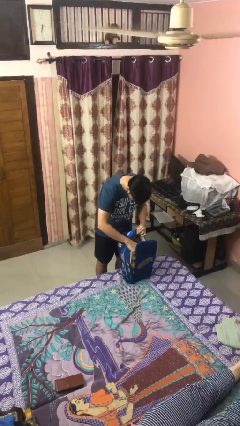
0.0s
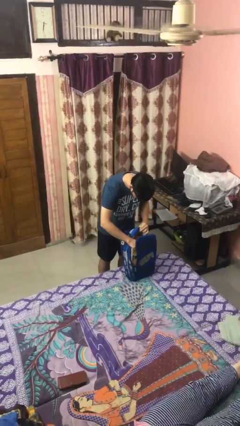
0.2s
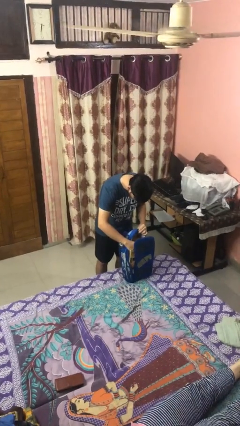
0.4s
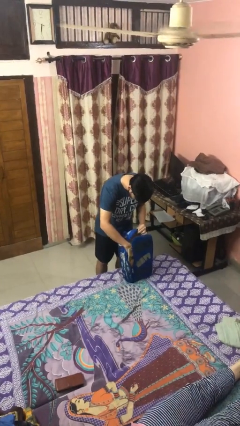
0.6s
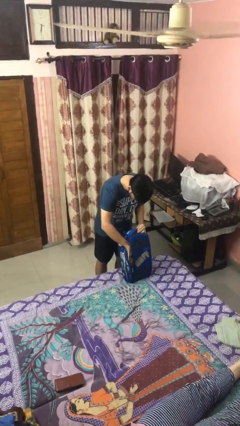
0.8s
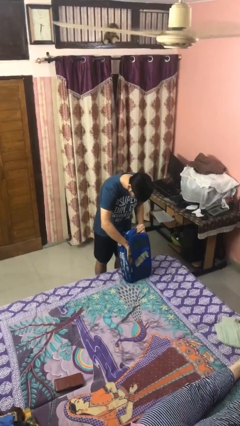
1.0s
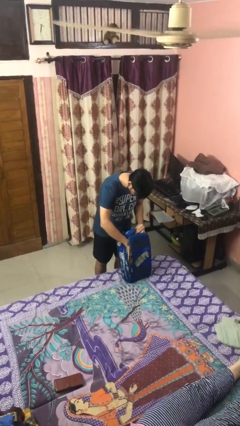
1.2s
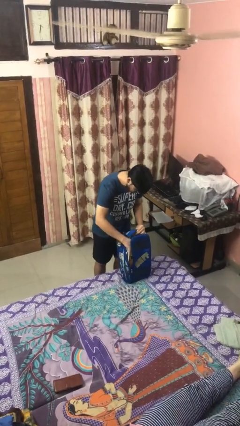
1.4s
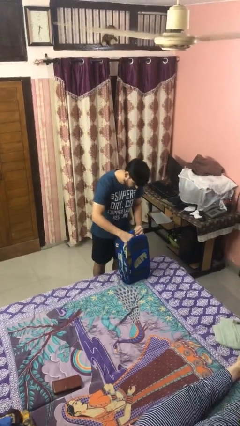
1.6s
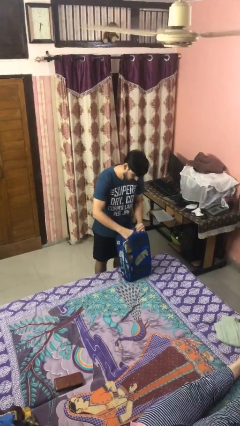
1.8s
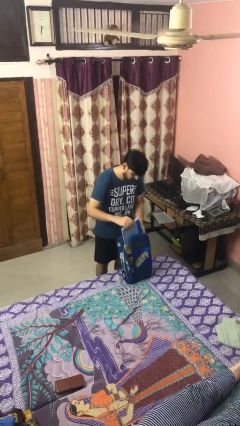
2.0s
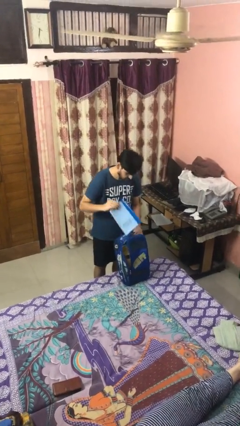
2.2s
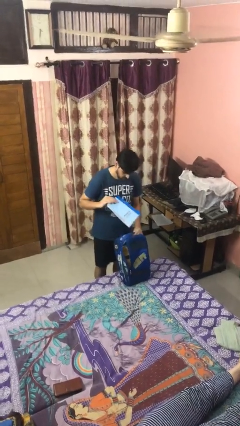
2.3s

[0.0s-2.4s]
person takes object from purse

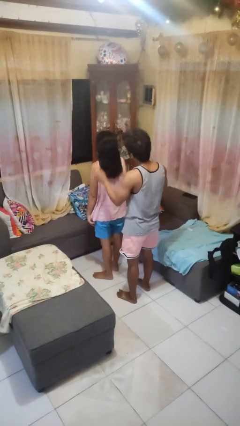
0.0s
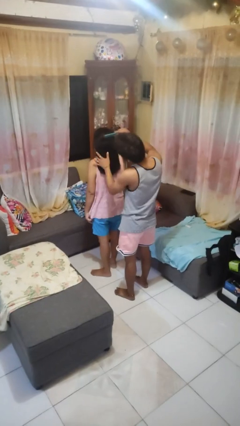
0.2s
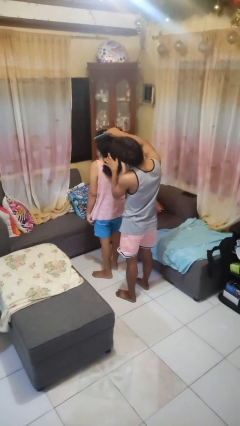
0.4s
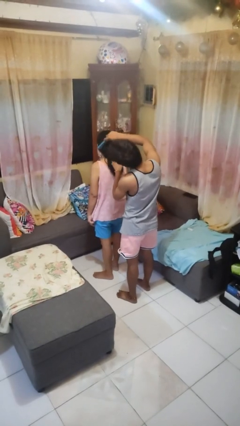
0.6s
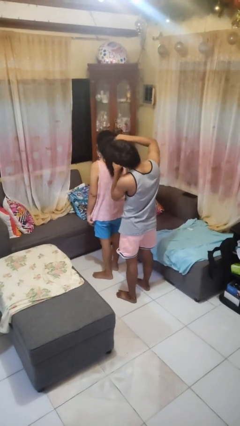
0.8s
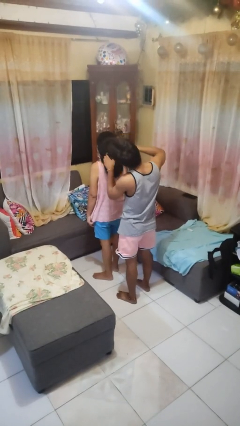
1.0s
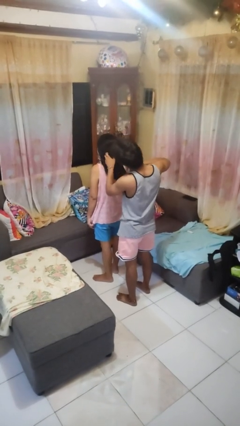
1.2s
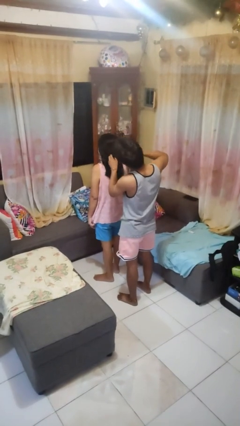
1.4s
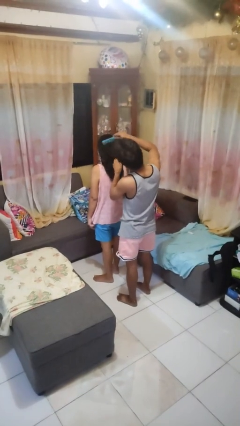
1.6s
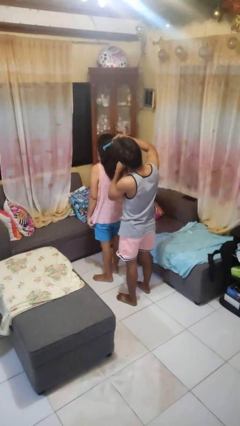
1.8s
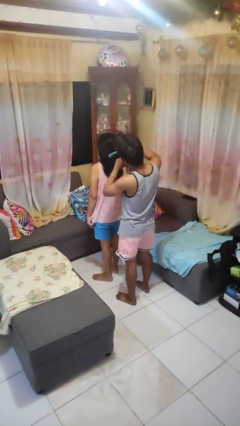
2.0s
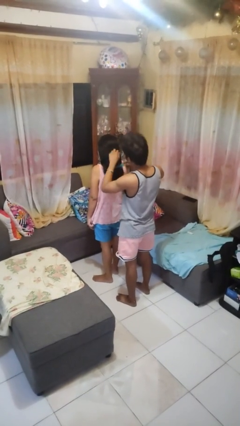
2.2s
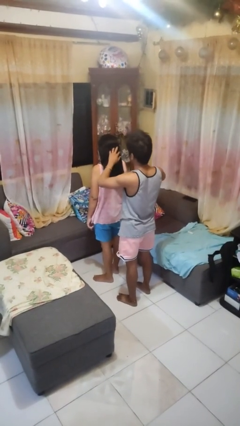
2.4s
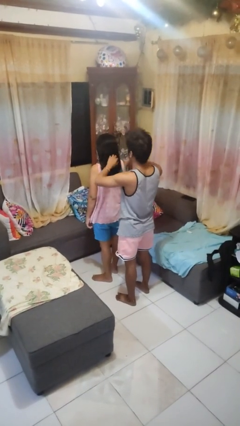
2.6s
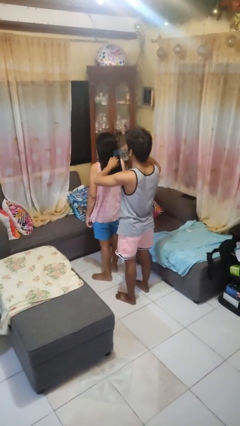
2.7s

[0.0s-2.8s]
person brushes hair of person

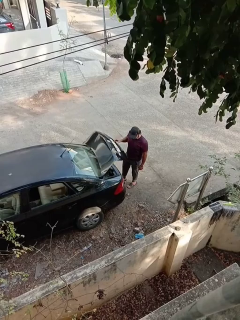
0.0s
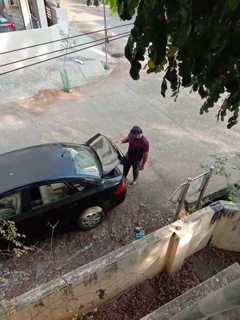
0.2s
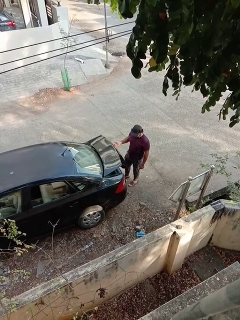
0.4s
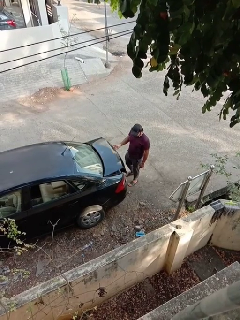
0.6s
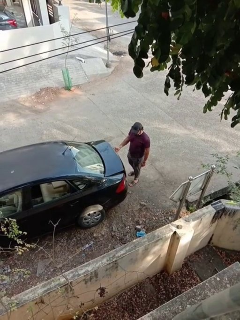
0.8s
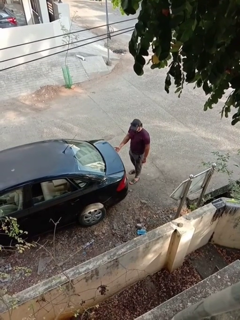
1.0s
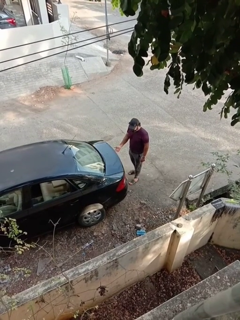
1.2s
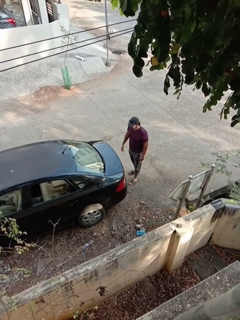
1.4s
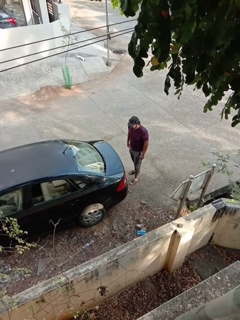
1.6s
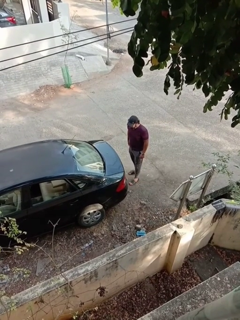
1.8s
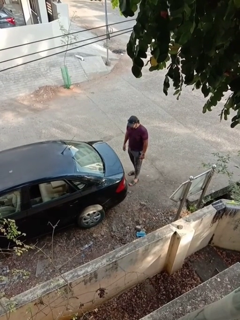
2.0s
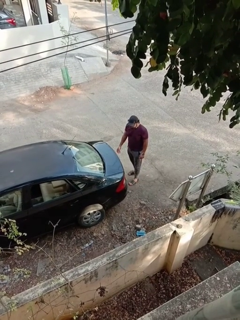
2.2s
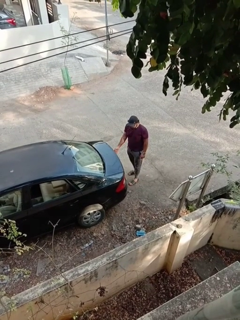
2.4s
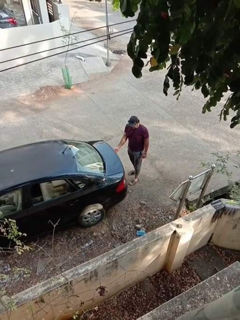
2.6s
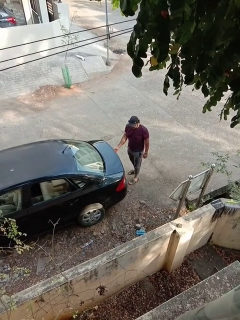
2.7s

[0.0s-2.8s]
person closes car trunk

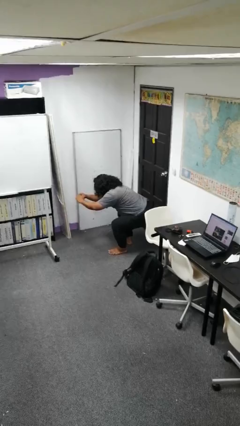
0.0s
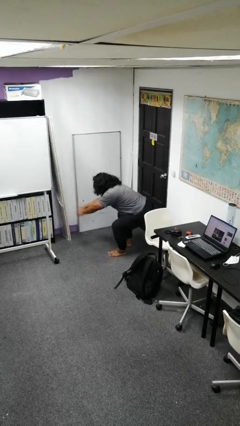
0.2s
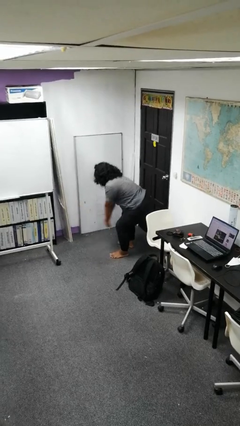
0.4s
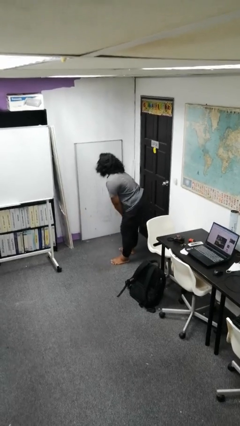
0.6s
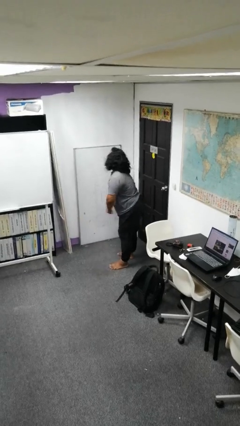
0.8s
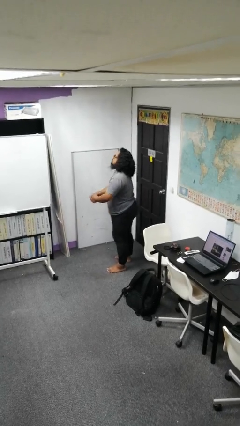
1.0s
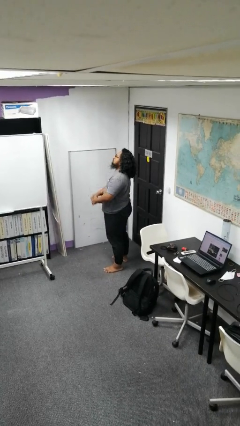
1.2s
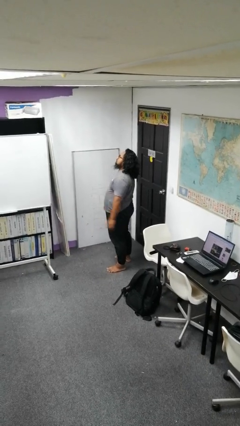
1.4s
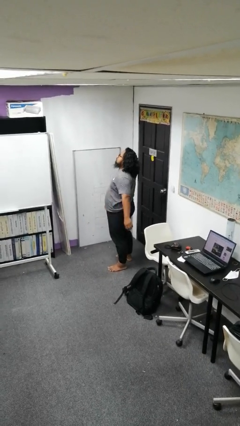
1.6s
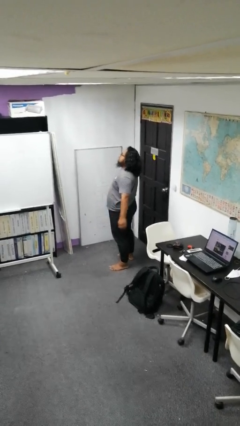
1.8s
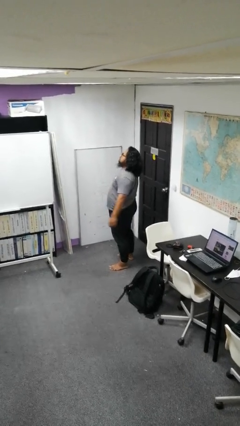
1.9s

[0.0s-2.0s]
person stands up

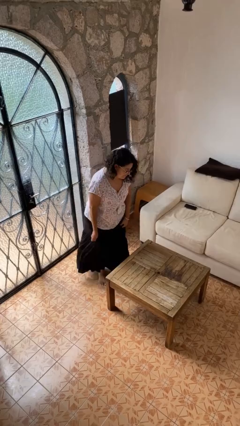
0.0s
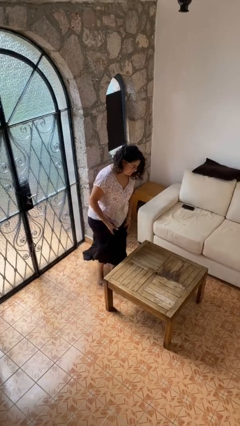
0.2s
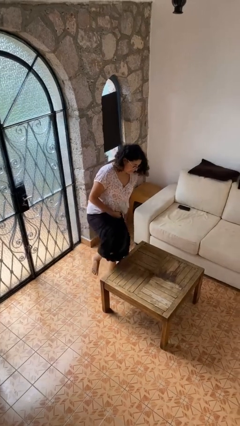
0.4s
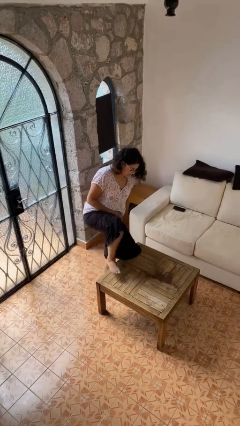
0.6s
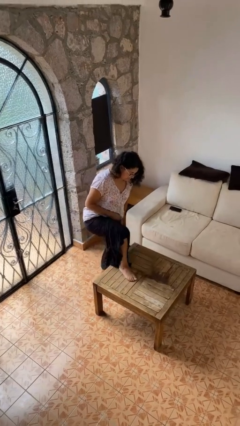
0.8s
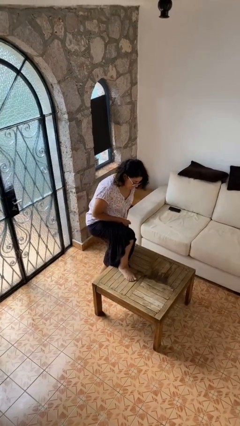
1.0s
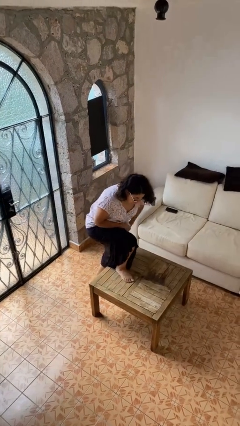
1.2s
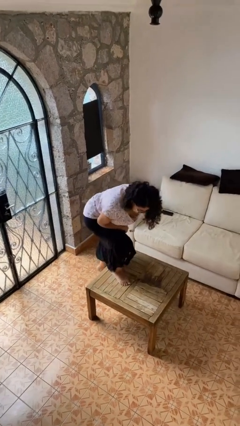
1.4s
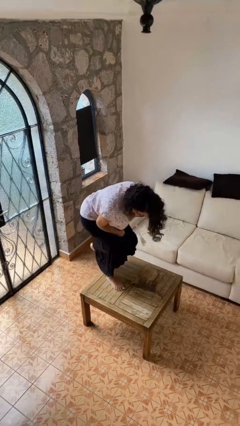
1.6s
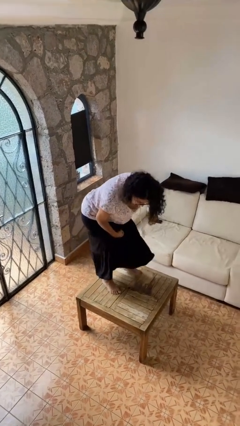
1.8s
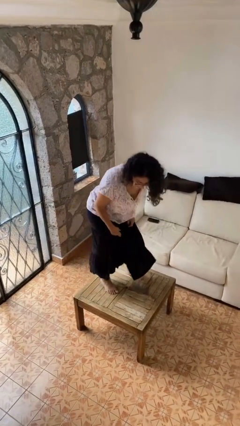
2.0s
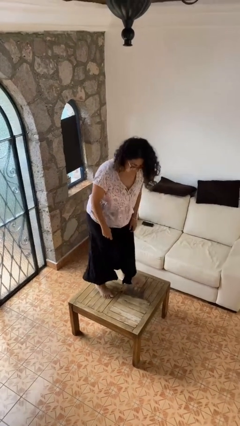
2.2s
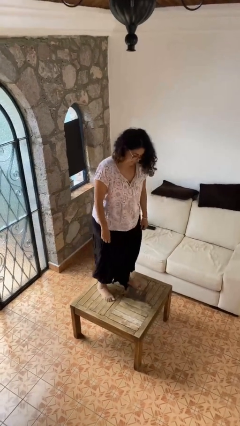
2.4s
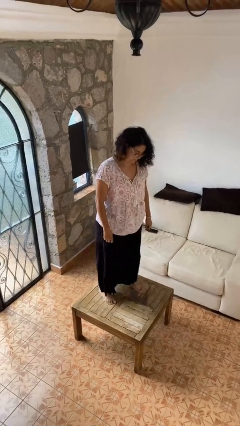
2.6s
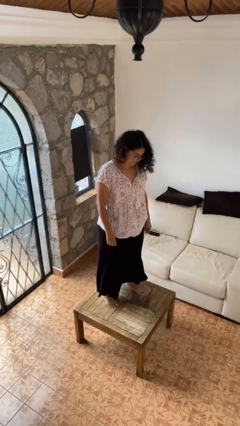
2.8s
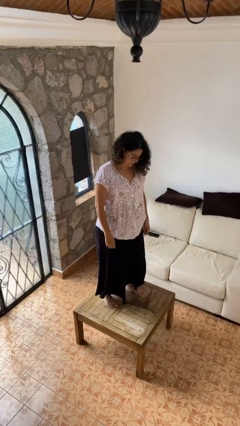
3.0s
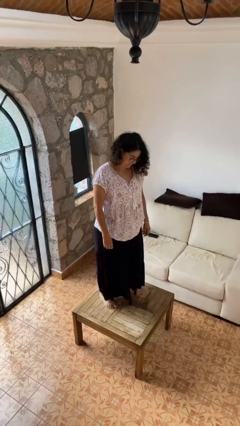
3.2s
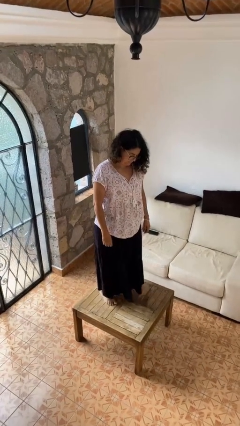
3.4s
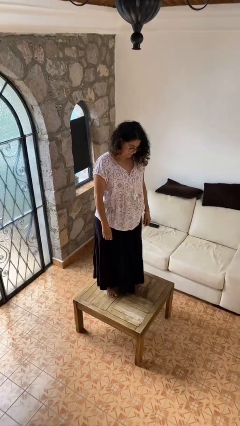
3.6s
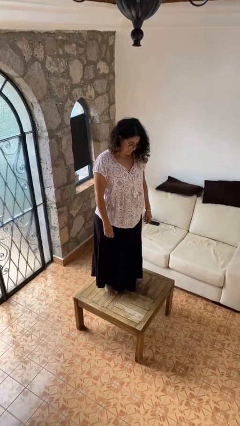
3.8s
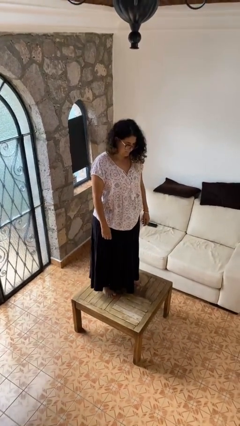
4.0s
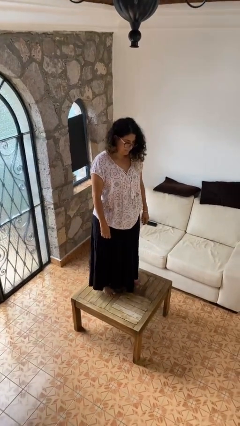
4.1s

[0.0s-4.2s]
person climbs on table

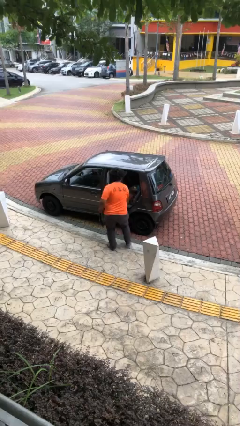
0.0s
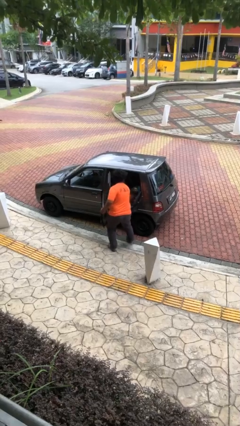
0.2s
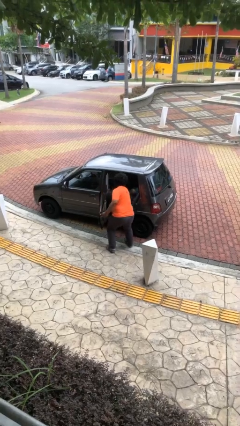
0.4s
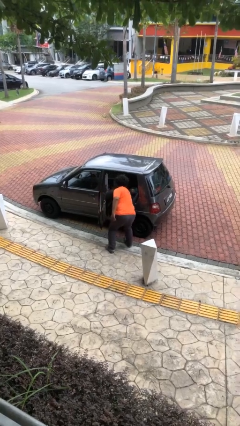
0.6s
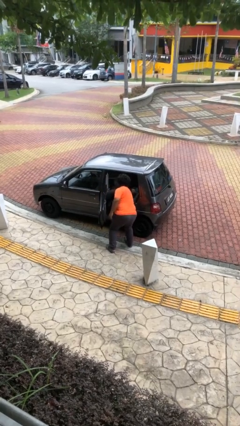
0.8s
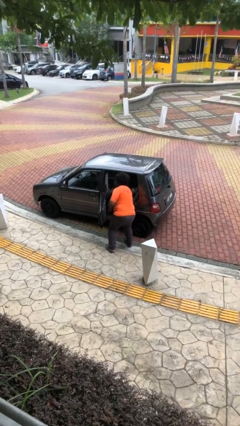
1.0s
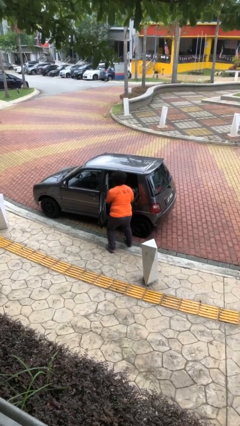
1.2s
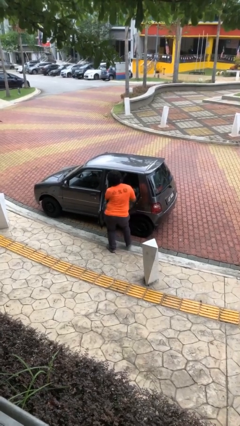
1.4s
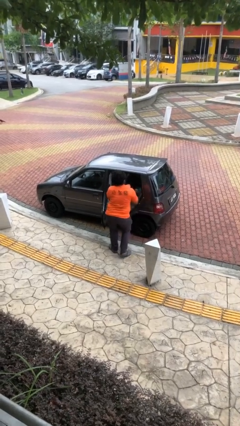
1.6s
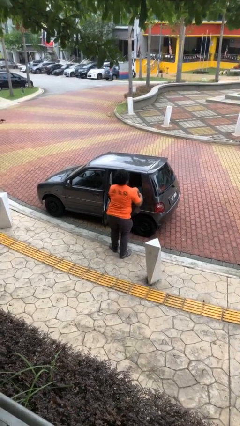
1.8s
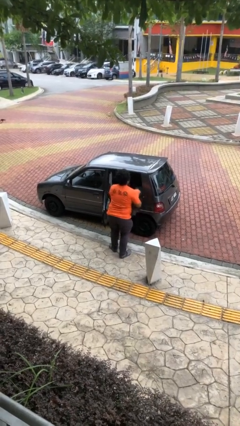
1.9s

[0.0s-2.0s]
person unloads car

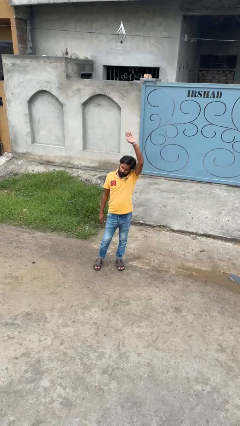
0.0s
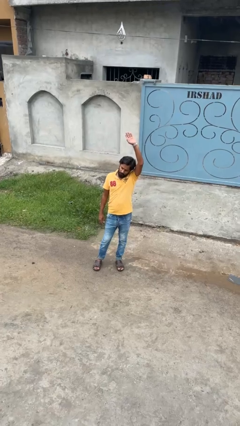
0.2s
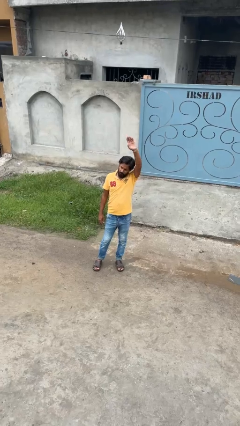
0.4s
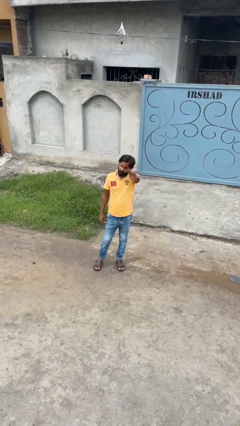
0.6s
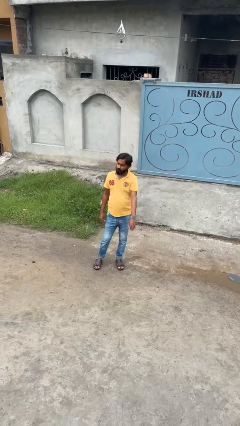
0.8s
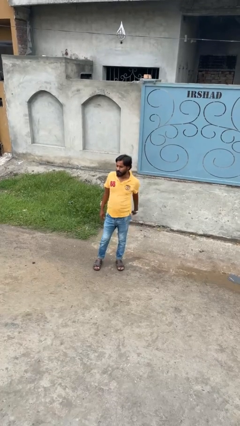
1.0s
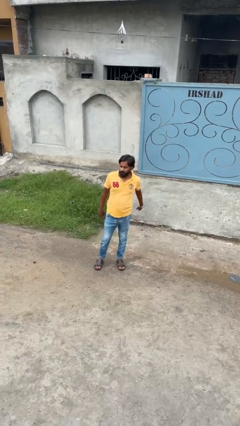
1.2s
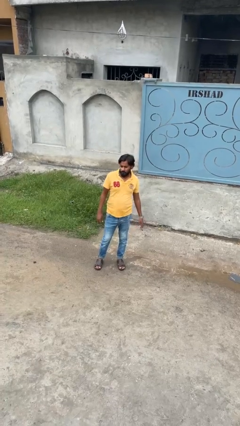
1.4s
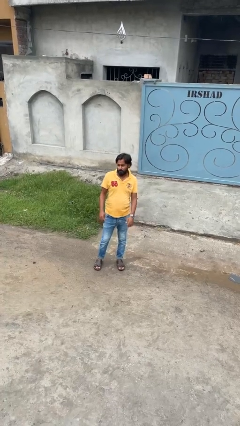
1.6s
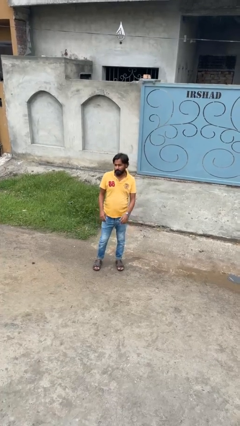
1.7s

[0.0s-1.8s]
person gestures lower hand
